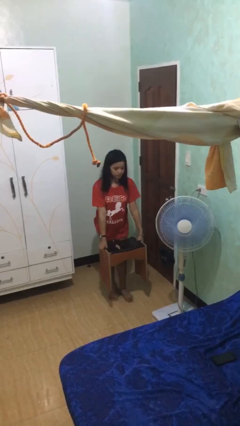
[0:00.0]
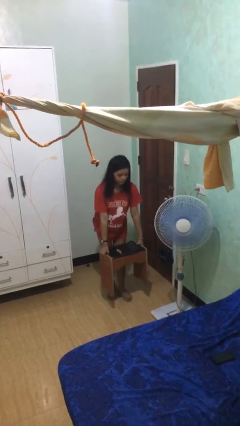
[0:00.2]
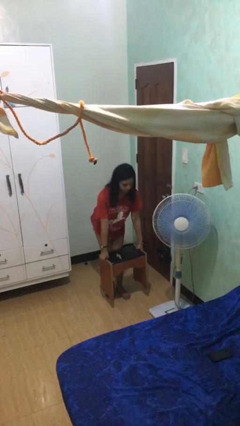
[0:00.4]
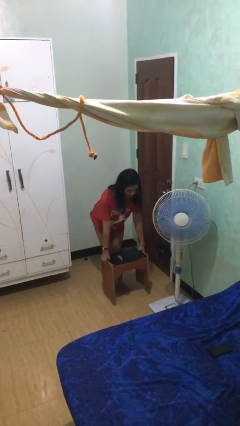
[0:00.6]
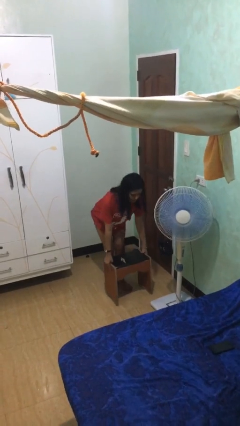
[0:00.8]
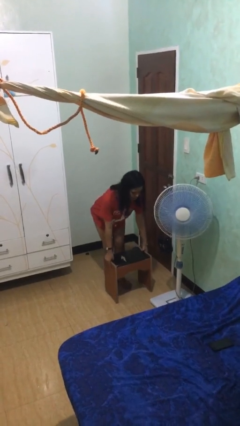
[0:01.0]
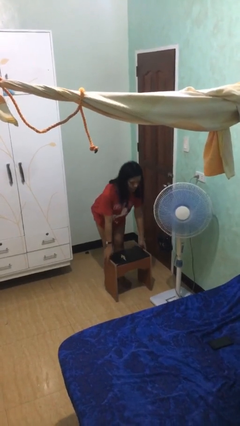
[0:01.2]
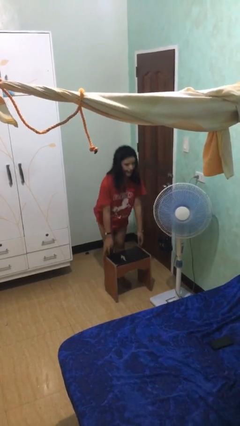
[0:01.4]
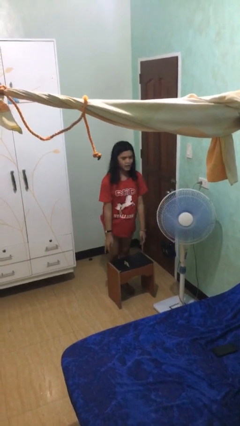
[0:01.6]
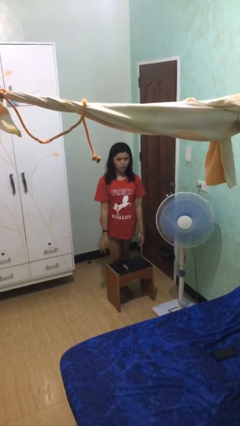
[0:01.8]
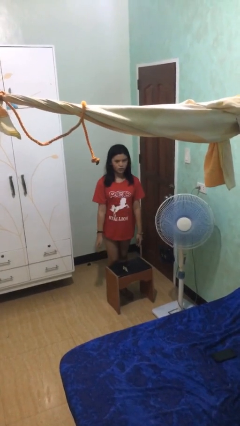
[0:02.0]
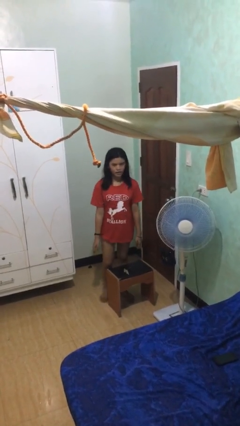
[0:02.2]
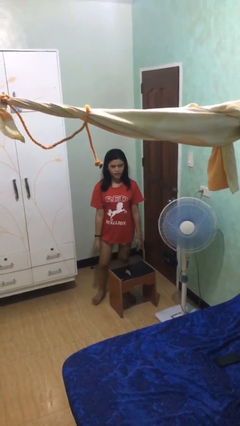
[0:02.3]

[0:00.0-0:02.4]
person puts down object on floor

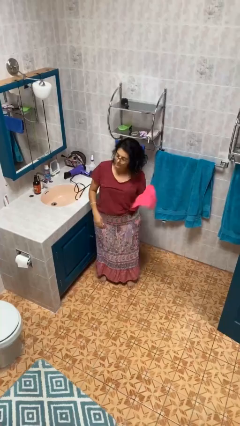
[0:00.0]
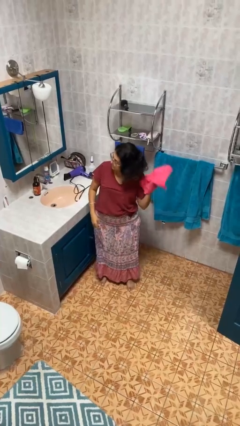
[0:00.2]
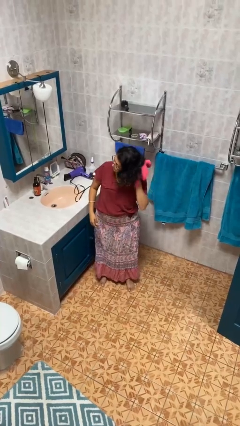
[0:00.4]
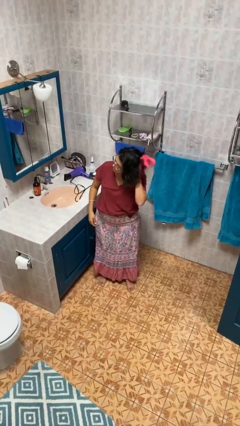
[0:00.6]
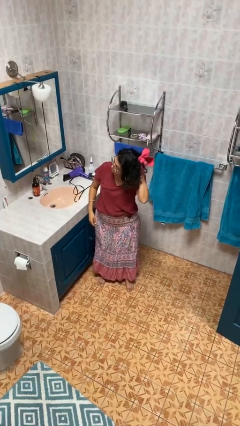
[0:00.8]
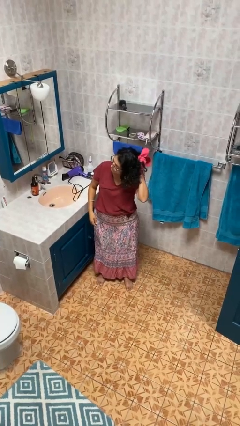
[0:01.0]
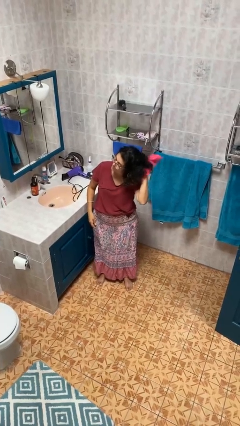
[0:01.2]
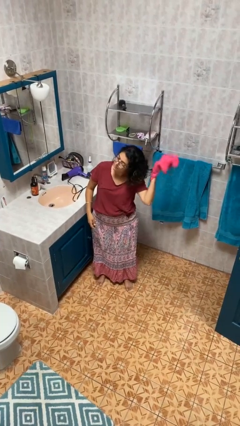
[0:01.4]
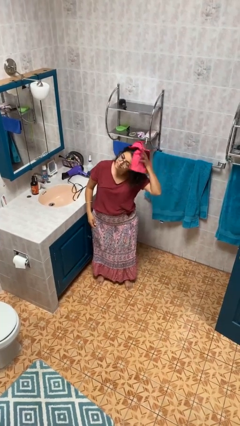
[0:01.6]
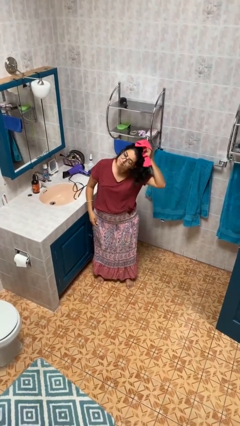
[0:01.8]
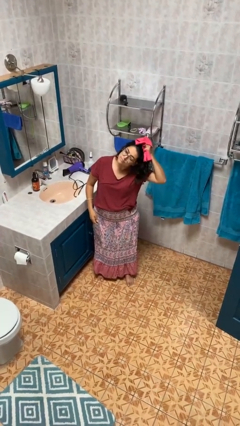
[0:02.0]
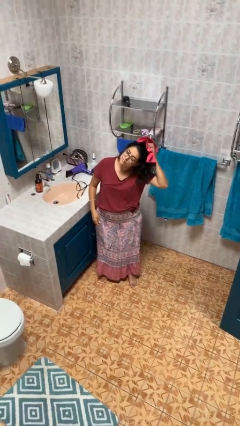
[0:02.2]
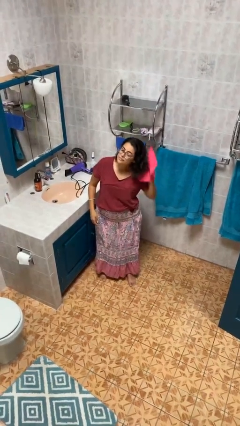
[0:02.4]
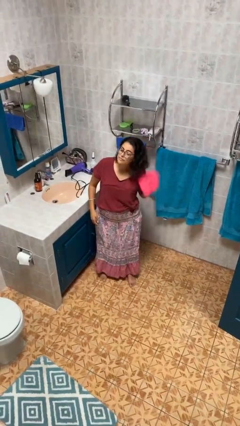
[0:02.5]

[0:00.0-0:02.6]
person dries hair with towel

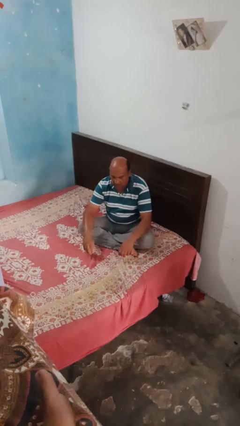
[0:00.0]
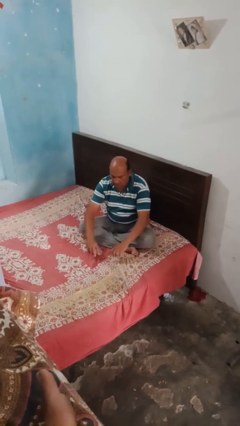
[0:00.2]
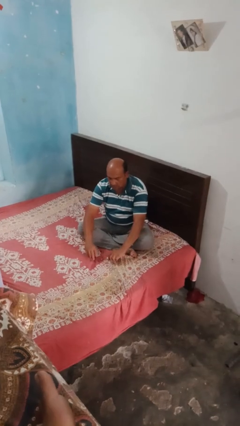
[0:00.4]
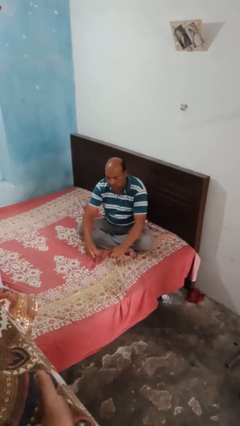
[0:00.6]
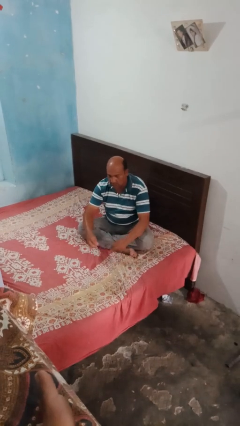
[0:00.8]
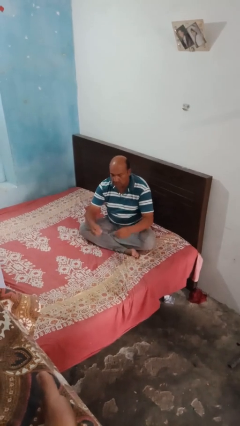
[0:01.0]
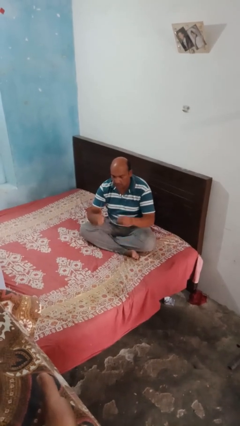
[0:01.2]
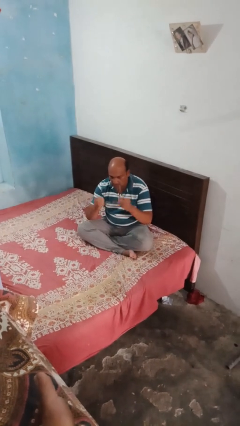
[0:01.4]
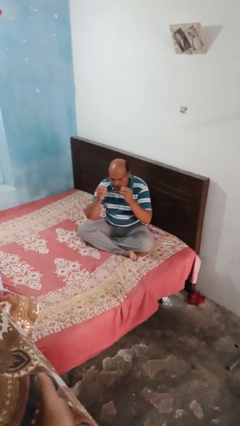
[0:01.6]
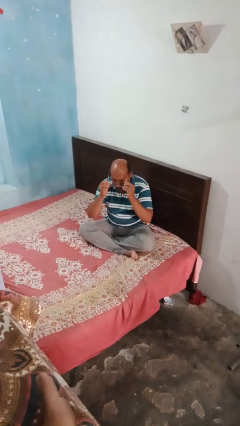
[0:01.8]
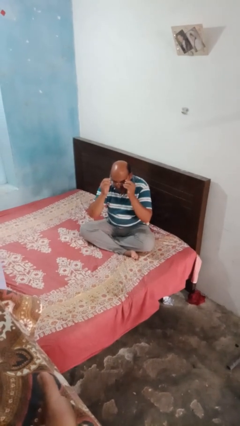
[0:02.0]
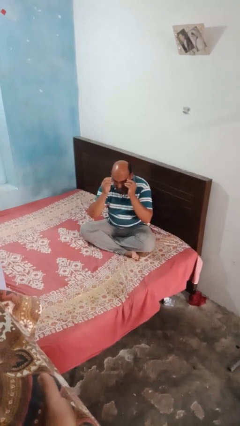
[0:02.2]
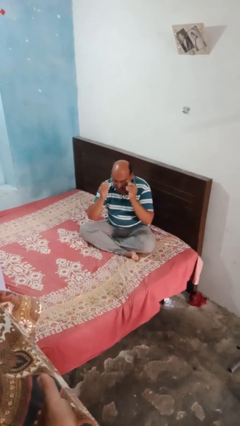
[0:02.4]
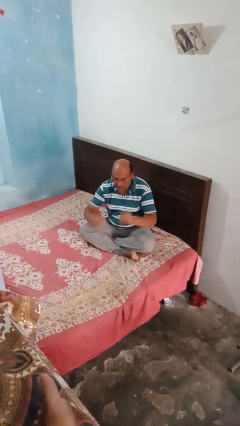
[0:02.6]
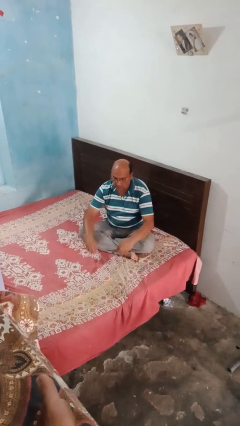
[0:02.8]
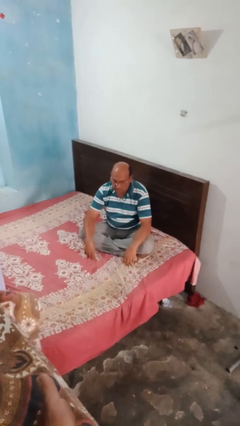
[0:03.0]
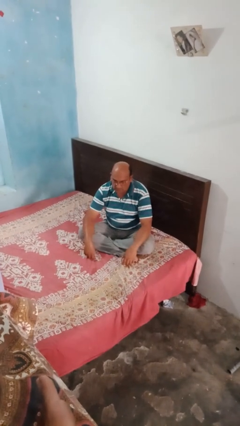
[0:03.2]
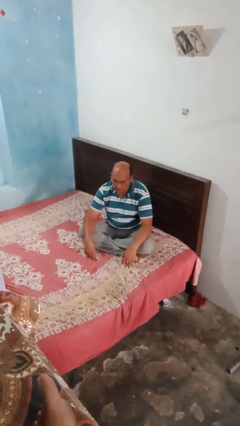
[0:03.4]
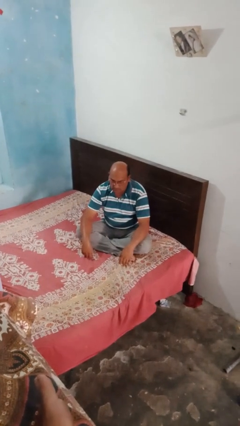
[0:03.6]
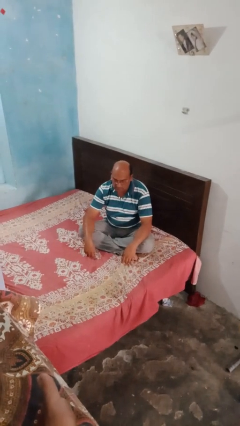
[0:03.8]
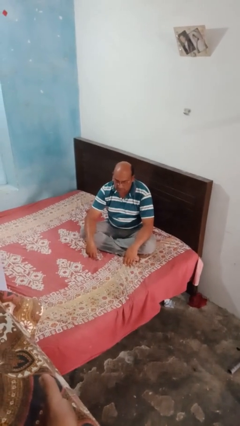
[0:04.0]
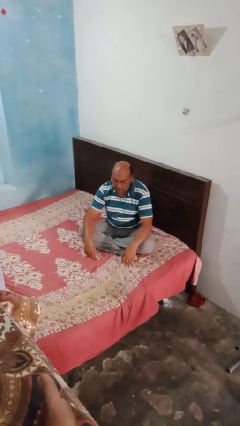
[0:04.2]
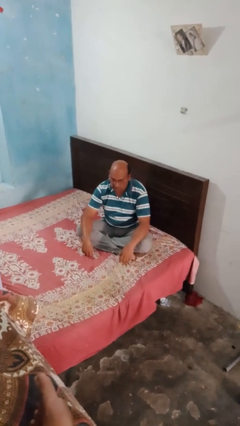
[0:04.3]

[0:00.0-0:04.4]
person puts on glasses

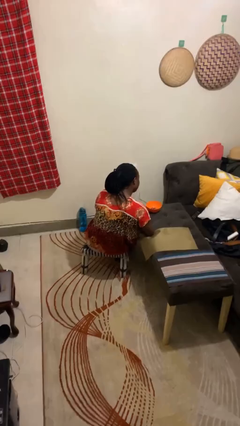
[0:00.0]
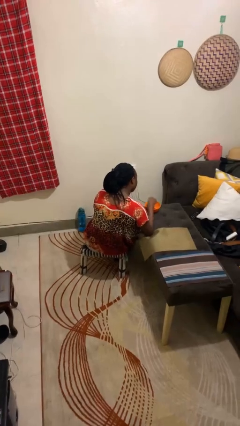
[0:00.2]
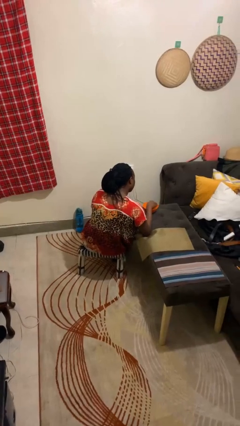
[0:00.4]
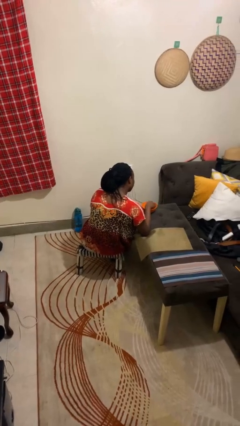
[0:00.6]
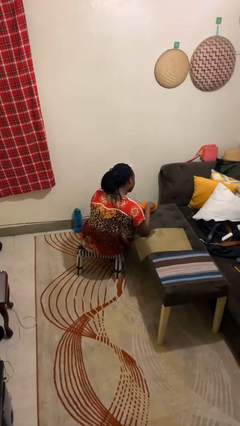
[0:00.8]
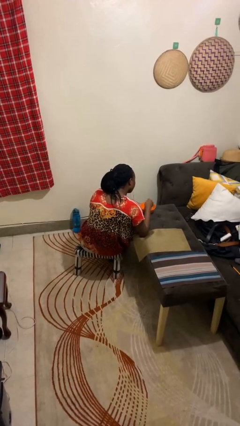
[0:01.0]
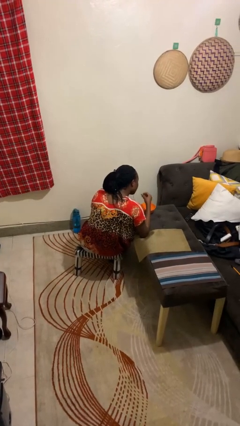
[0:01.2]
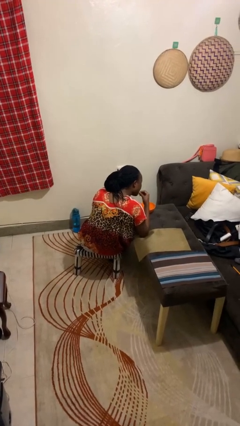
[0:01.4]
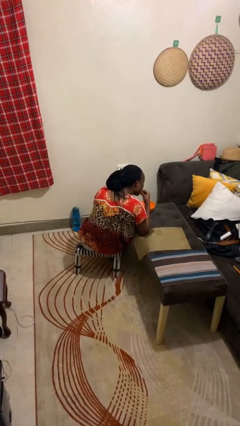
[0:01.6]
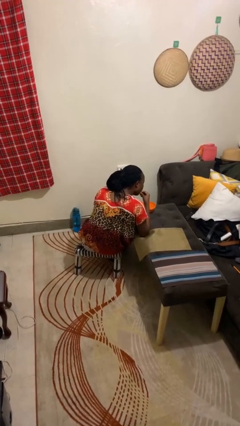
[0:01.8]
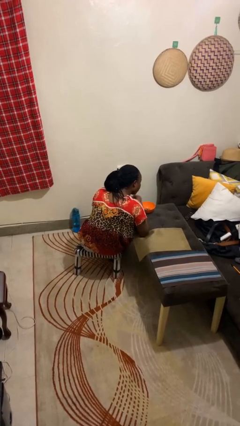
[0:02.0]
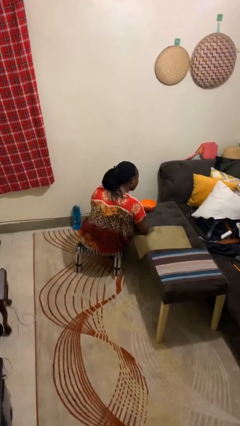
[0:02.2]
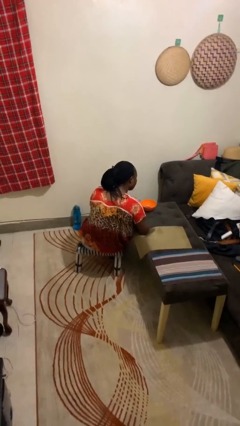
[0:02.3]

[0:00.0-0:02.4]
person eats with hands

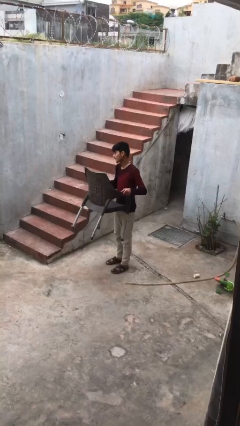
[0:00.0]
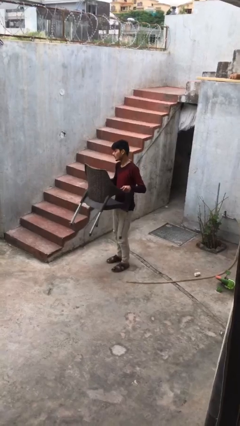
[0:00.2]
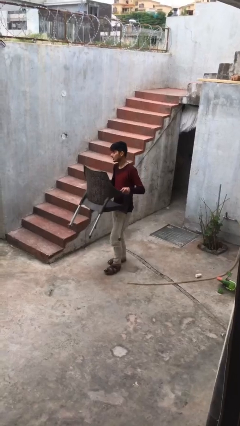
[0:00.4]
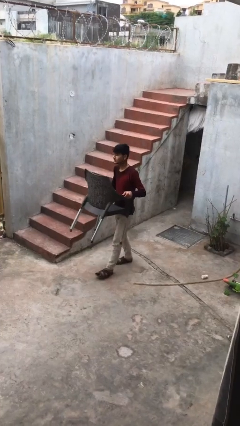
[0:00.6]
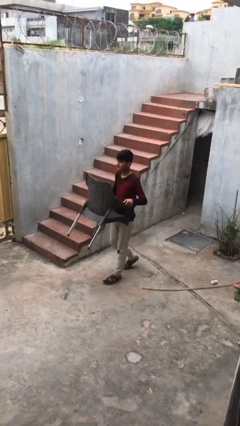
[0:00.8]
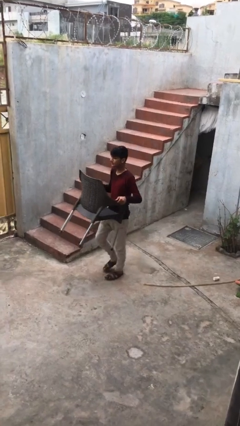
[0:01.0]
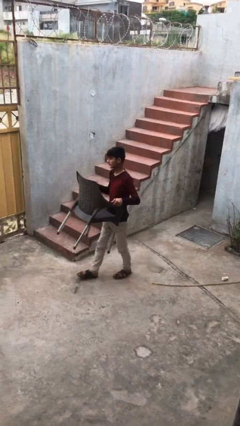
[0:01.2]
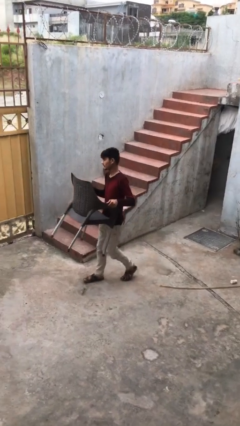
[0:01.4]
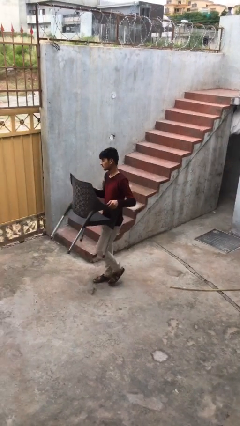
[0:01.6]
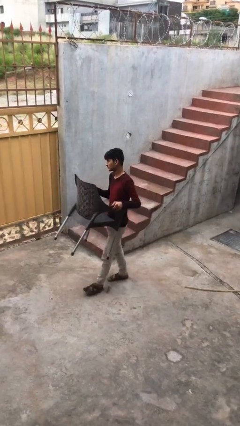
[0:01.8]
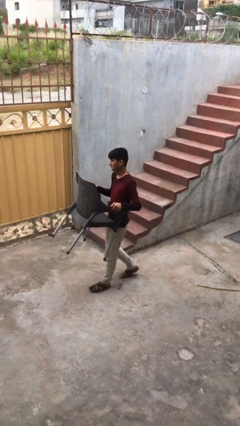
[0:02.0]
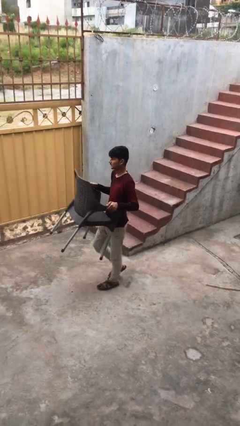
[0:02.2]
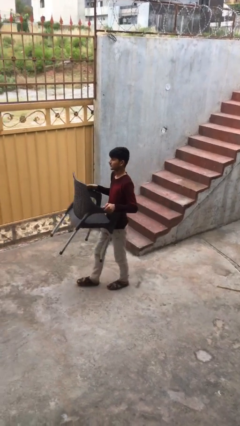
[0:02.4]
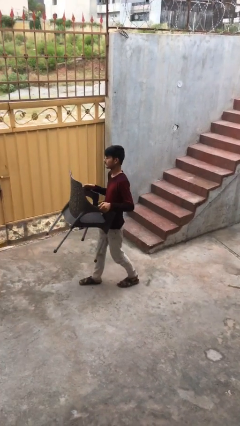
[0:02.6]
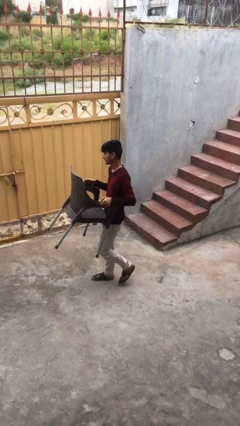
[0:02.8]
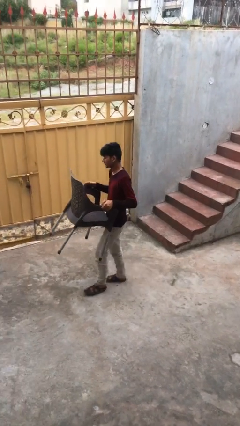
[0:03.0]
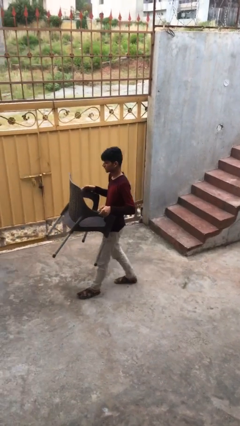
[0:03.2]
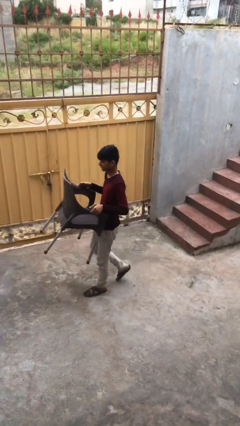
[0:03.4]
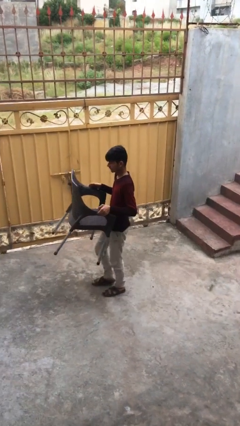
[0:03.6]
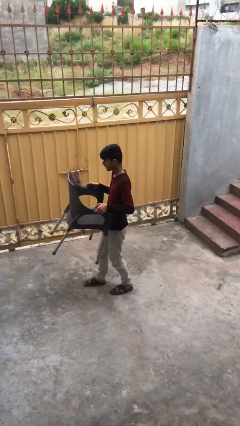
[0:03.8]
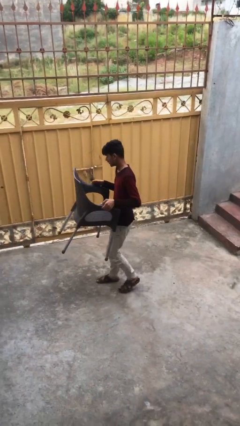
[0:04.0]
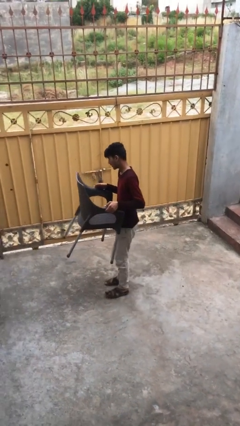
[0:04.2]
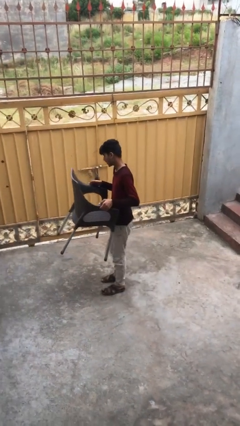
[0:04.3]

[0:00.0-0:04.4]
person carries heavy object

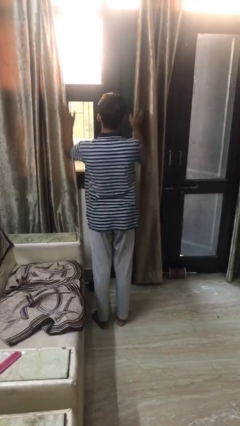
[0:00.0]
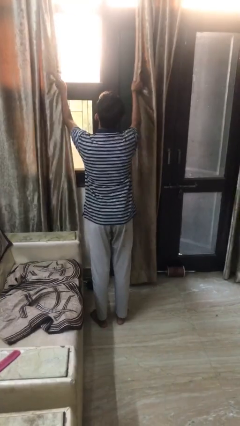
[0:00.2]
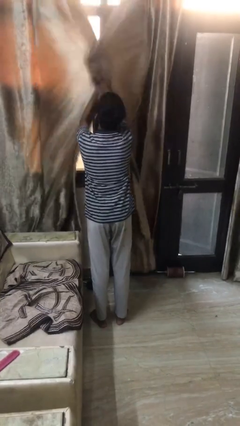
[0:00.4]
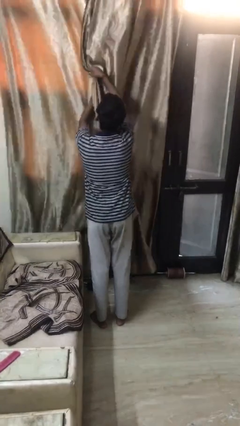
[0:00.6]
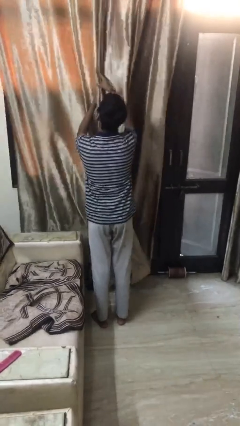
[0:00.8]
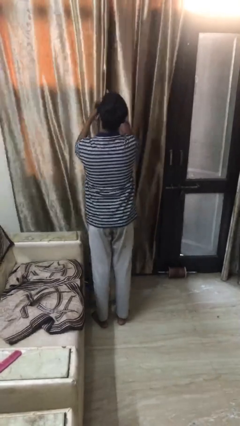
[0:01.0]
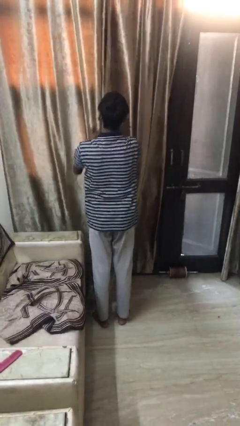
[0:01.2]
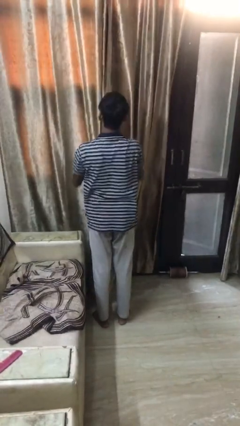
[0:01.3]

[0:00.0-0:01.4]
person closes curtains
